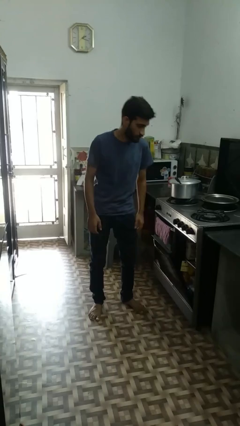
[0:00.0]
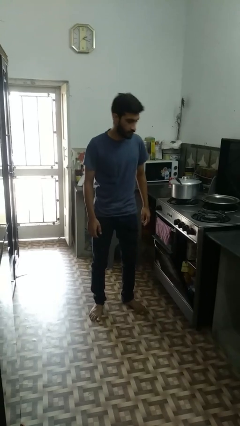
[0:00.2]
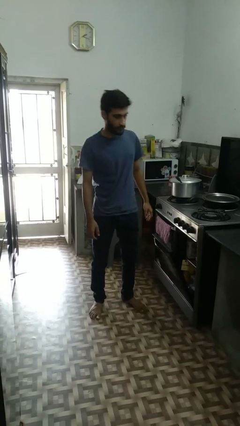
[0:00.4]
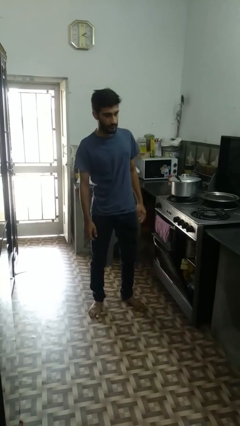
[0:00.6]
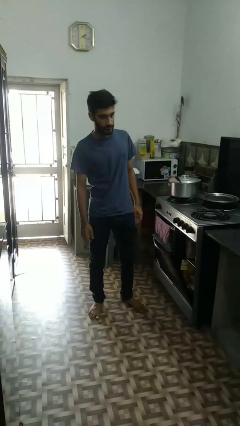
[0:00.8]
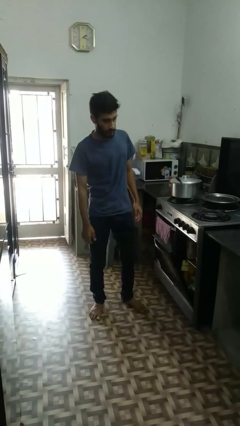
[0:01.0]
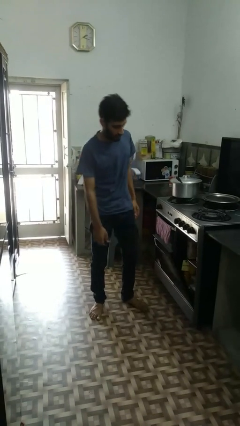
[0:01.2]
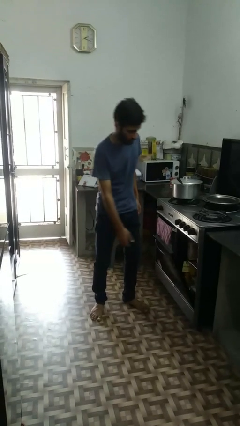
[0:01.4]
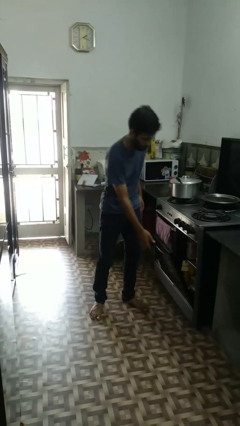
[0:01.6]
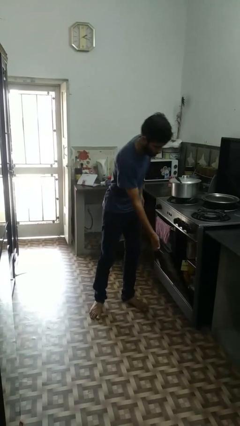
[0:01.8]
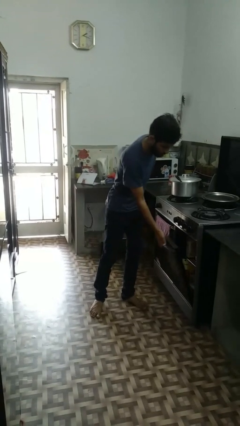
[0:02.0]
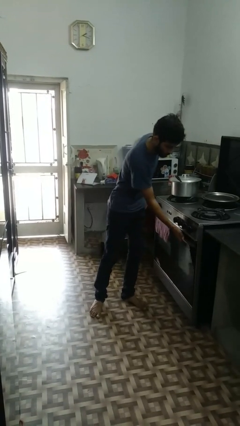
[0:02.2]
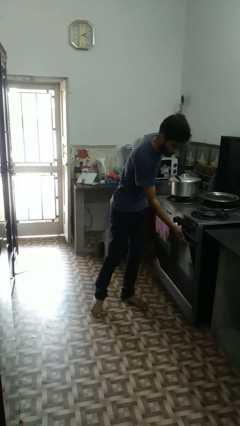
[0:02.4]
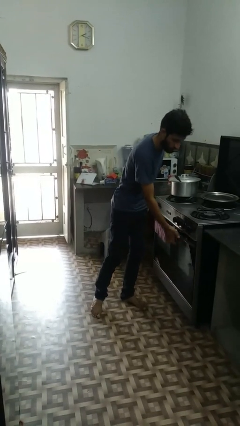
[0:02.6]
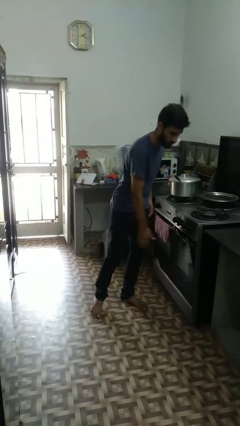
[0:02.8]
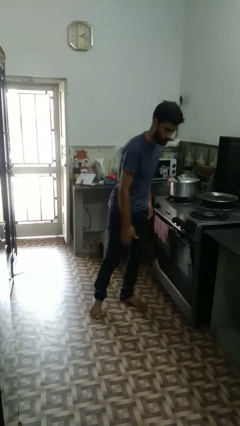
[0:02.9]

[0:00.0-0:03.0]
person closes dishwasher

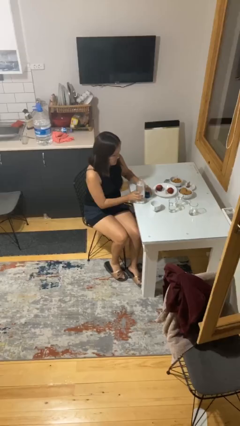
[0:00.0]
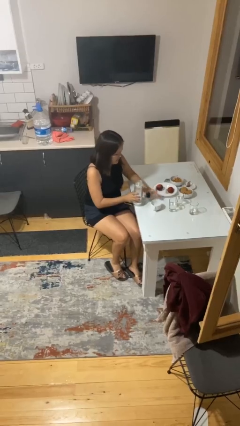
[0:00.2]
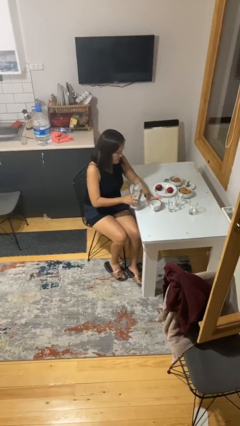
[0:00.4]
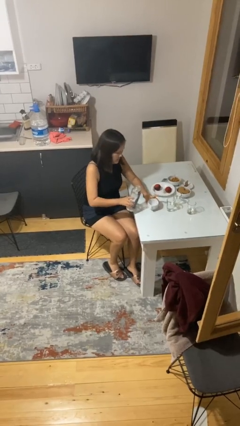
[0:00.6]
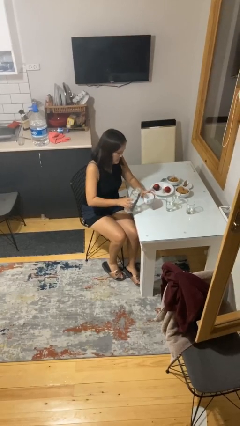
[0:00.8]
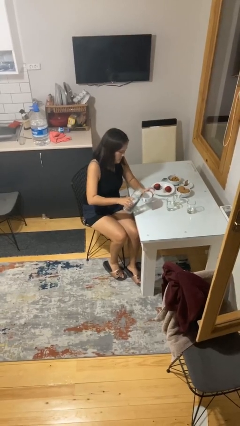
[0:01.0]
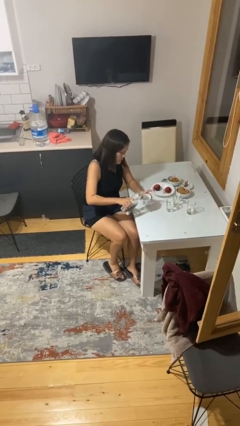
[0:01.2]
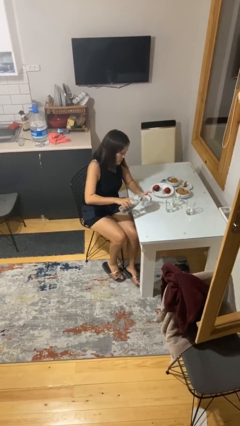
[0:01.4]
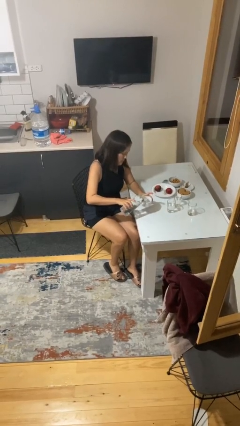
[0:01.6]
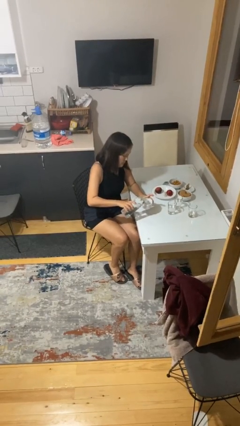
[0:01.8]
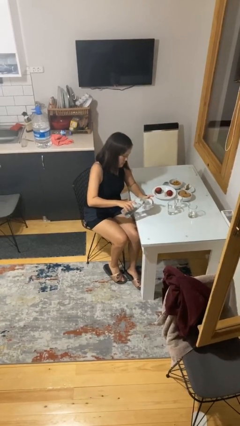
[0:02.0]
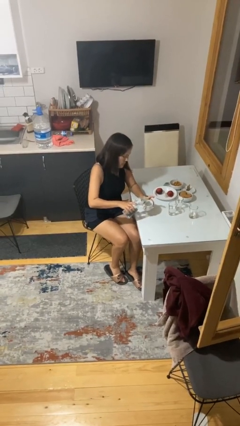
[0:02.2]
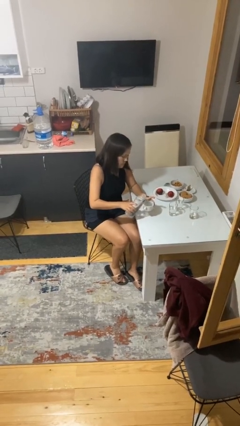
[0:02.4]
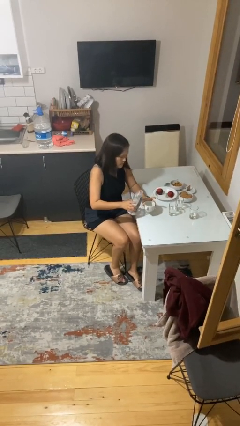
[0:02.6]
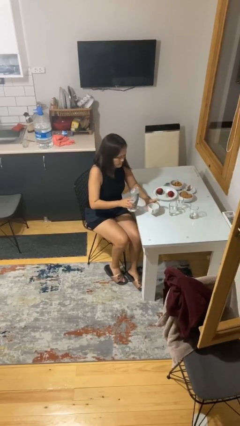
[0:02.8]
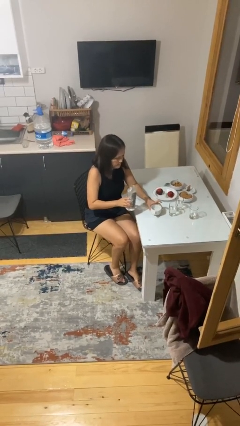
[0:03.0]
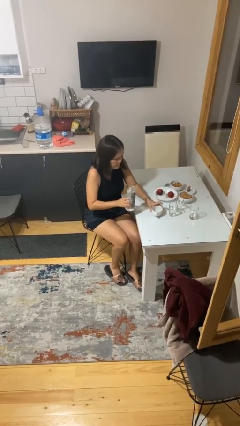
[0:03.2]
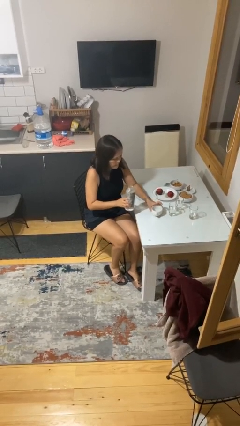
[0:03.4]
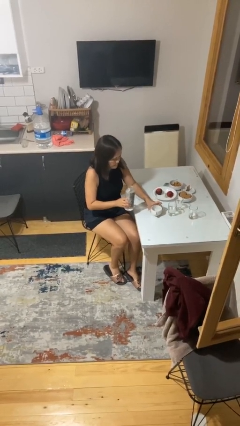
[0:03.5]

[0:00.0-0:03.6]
person pours liquid into cup

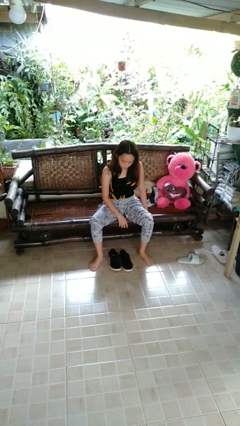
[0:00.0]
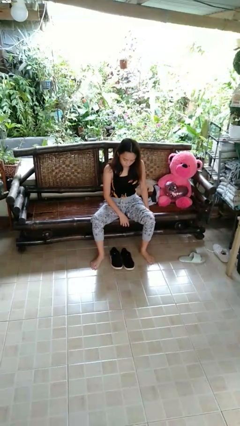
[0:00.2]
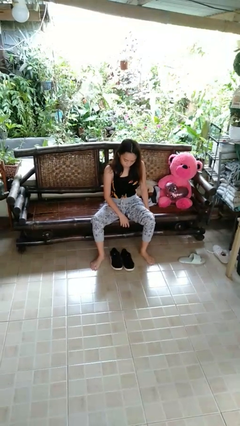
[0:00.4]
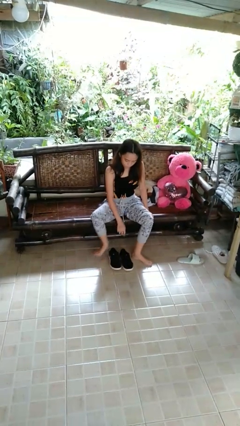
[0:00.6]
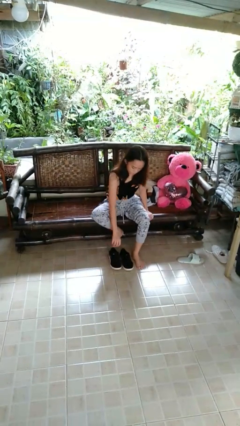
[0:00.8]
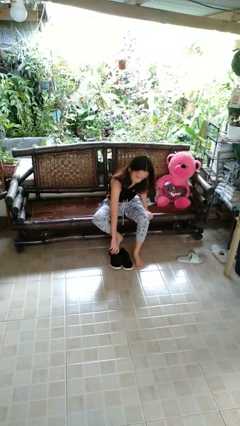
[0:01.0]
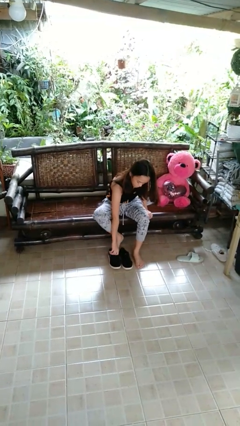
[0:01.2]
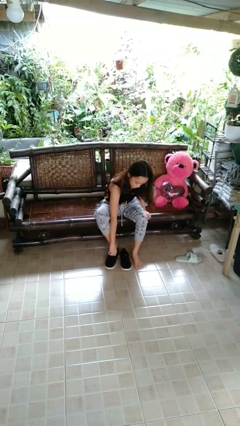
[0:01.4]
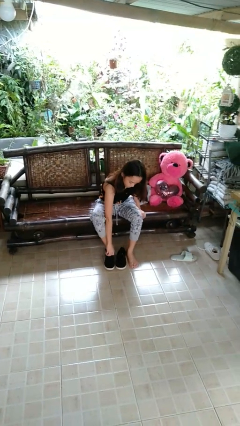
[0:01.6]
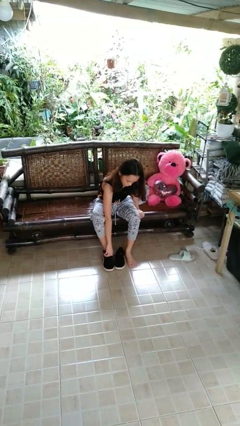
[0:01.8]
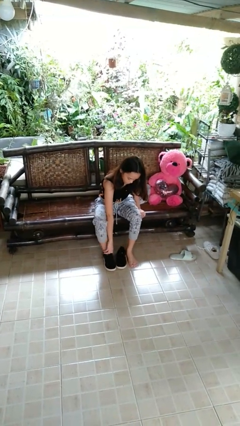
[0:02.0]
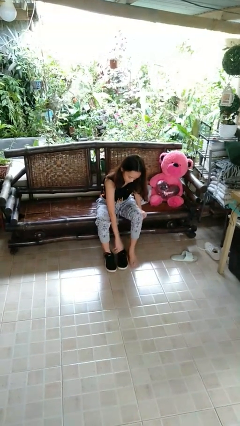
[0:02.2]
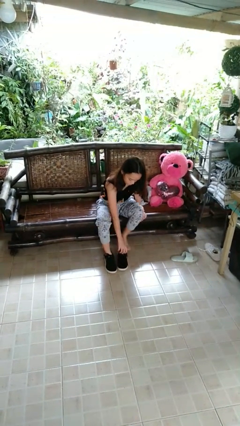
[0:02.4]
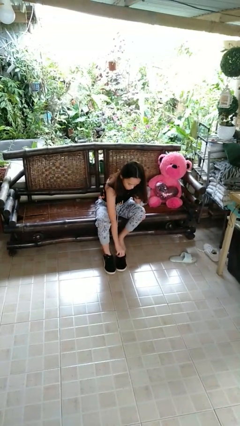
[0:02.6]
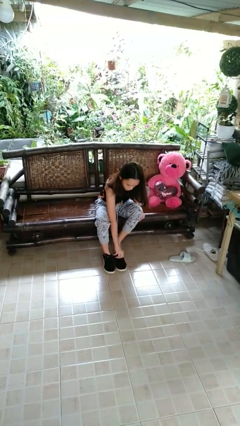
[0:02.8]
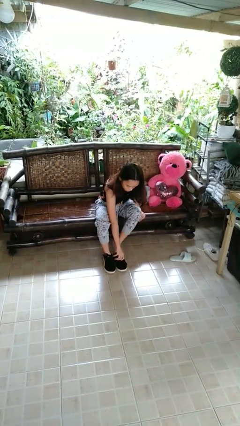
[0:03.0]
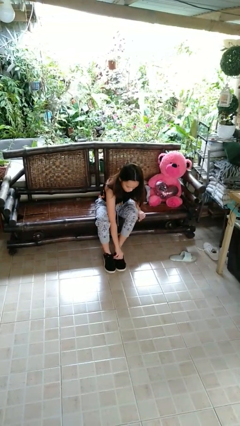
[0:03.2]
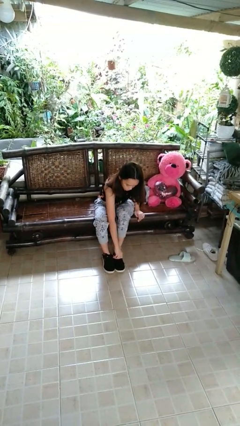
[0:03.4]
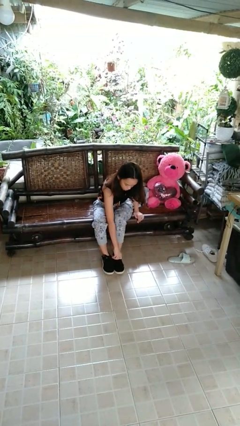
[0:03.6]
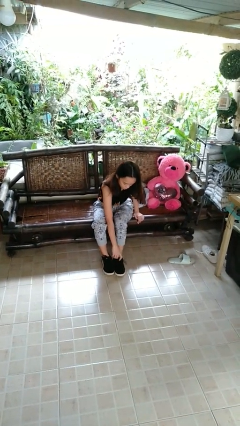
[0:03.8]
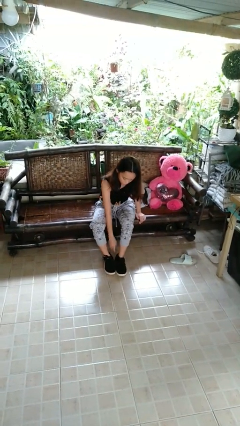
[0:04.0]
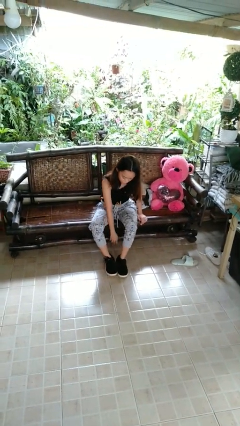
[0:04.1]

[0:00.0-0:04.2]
person puts on shoes

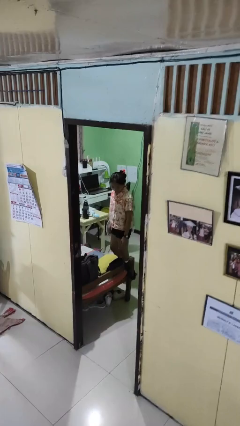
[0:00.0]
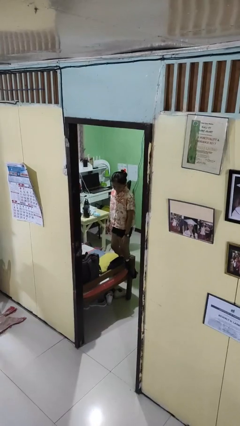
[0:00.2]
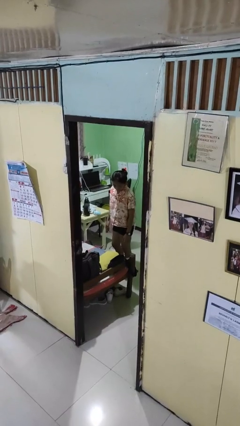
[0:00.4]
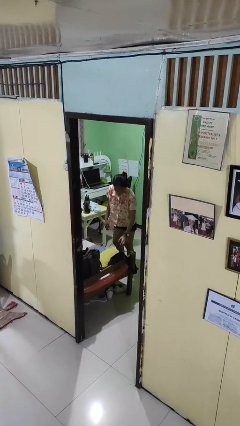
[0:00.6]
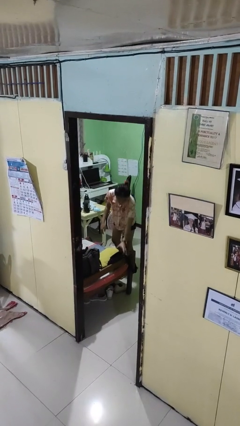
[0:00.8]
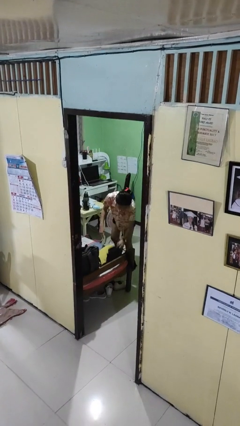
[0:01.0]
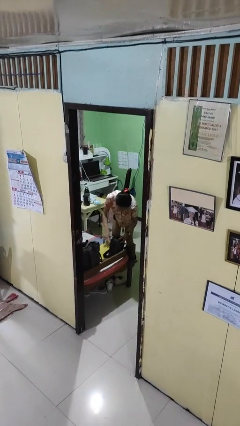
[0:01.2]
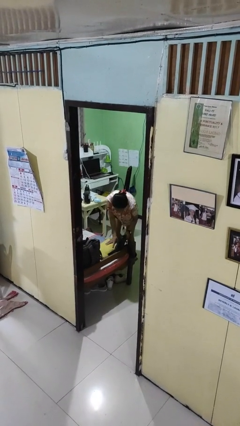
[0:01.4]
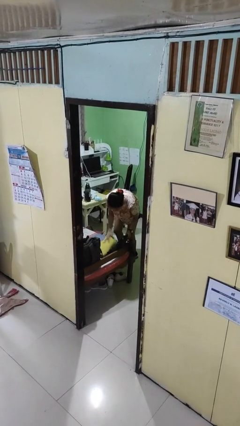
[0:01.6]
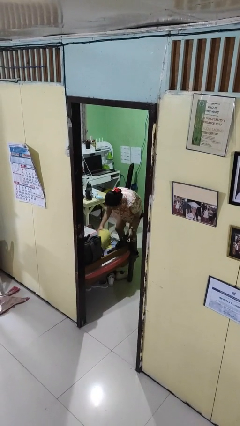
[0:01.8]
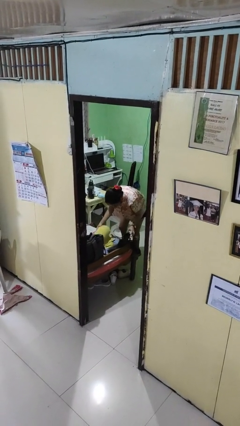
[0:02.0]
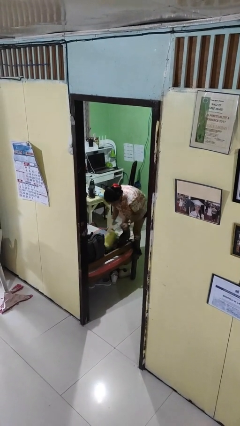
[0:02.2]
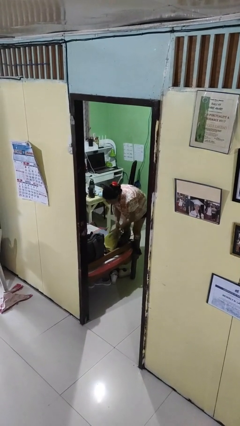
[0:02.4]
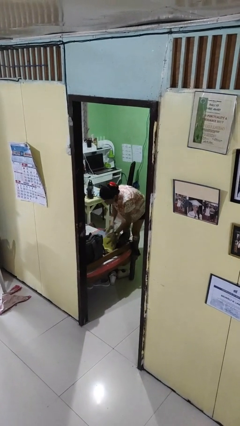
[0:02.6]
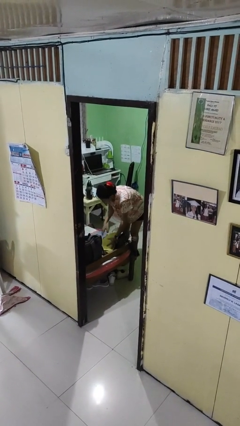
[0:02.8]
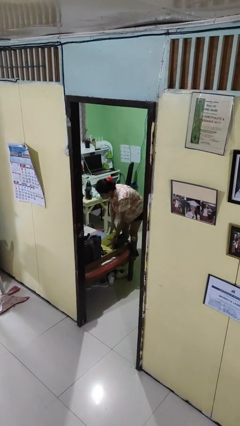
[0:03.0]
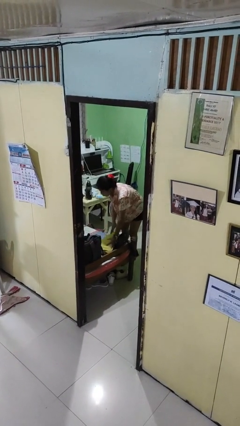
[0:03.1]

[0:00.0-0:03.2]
person searches under bed

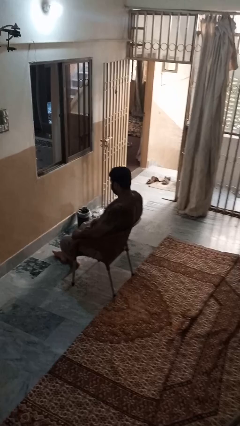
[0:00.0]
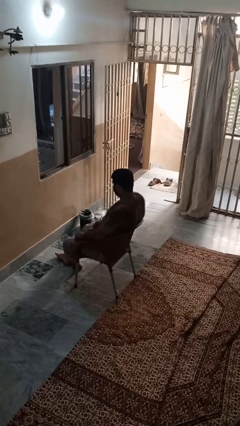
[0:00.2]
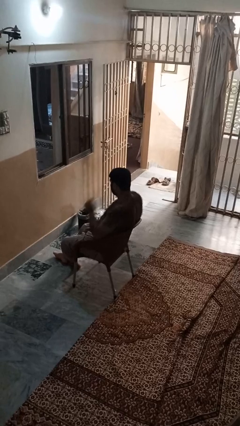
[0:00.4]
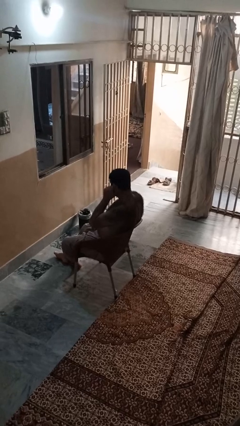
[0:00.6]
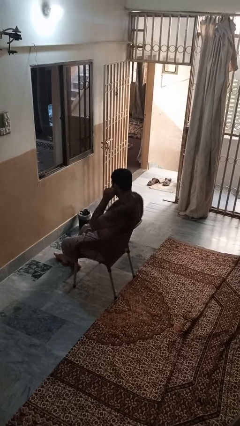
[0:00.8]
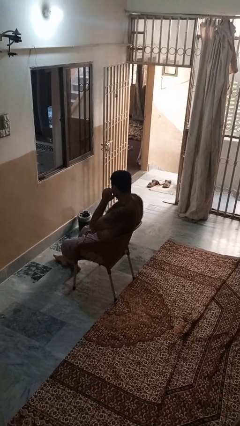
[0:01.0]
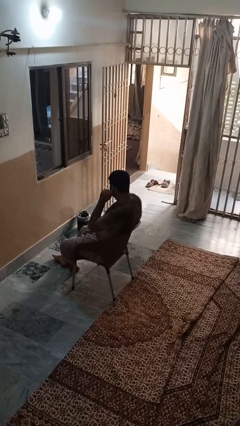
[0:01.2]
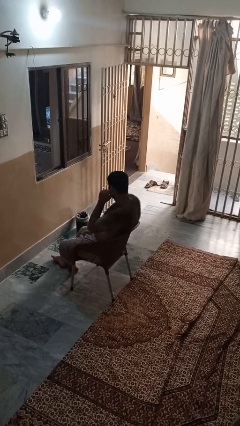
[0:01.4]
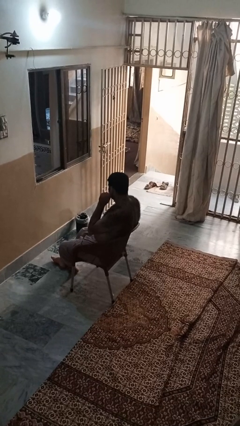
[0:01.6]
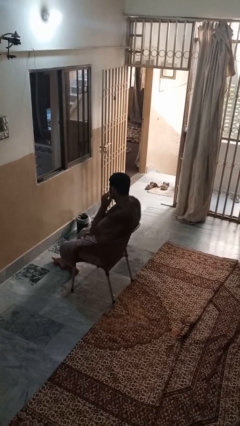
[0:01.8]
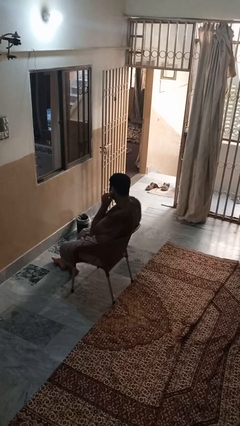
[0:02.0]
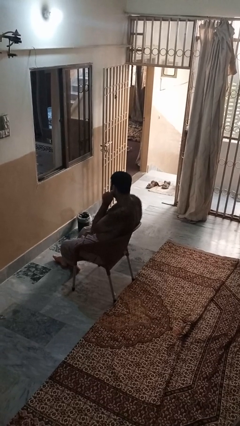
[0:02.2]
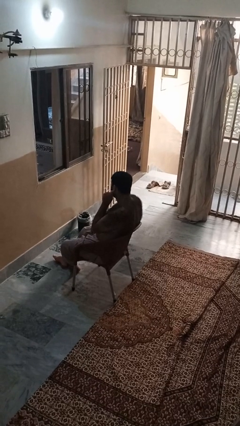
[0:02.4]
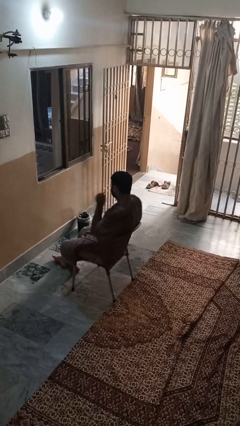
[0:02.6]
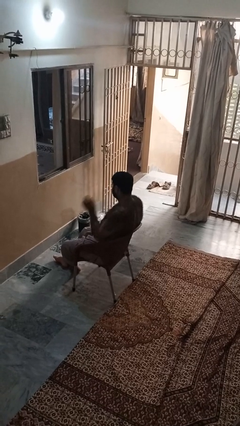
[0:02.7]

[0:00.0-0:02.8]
person touches earlobe

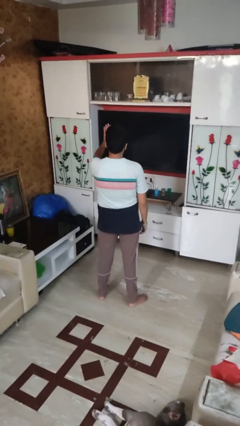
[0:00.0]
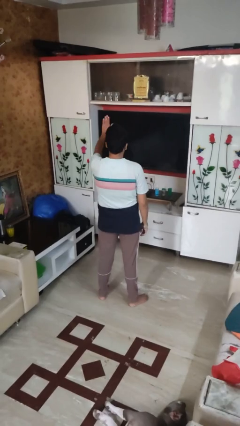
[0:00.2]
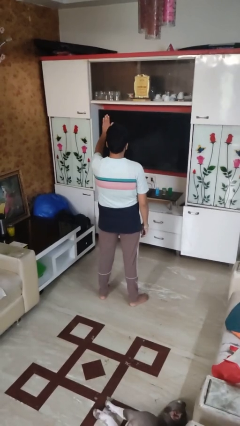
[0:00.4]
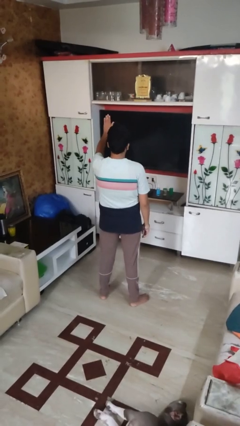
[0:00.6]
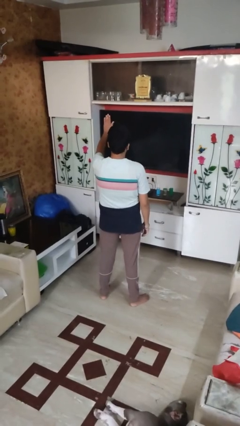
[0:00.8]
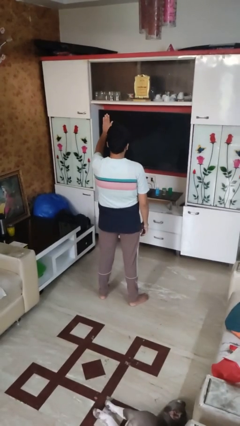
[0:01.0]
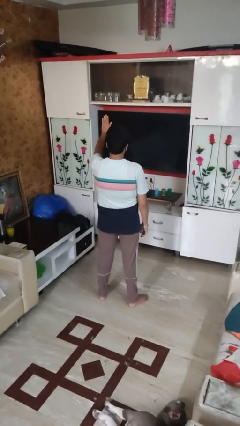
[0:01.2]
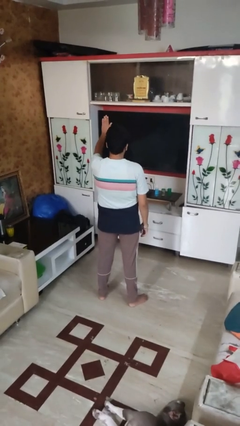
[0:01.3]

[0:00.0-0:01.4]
person gestures stop
